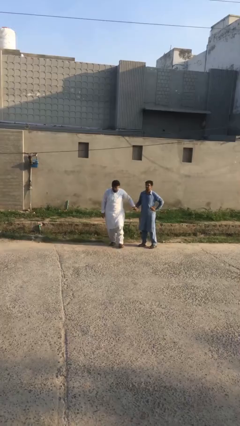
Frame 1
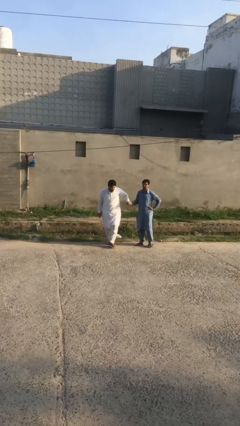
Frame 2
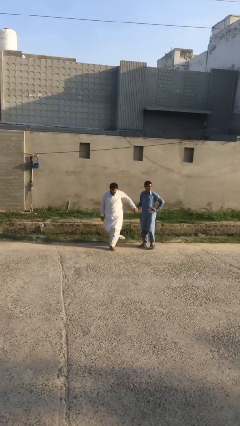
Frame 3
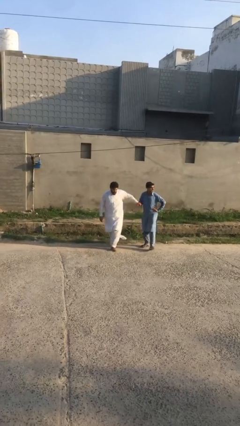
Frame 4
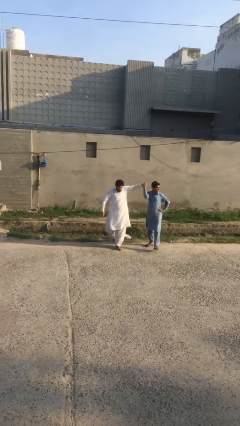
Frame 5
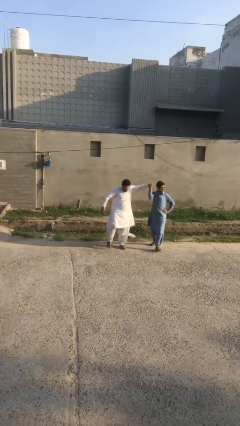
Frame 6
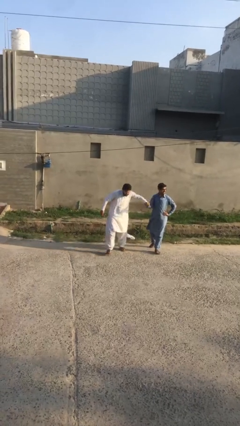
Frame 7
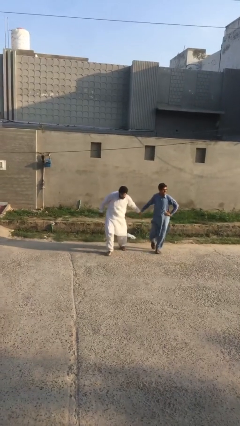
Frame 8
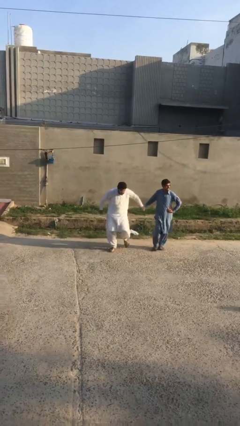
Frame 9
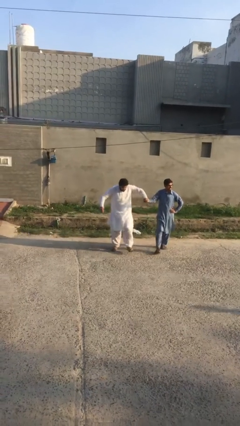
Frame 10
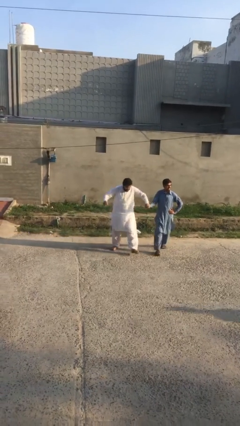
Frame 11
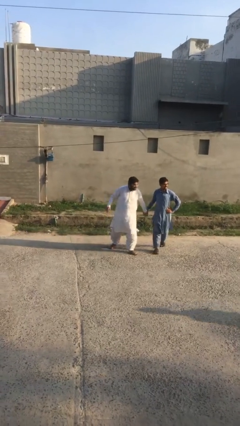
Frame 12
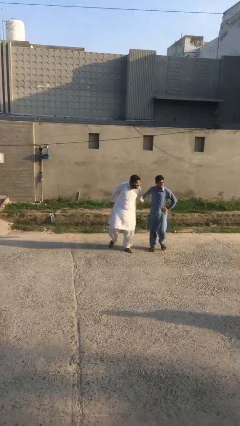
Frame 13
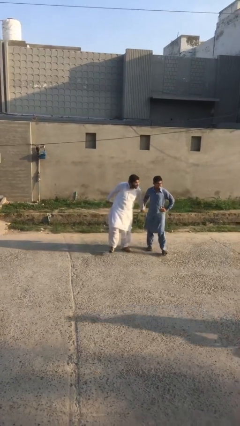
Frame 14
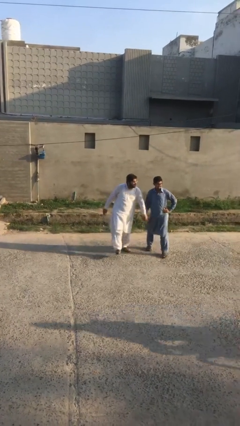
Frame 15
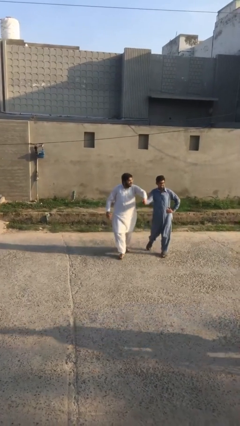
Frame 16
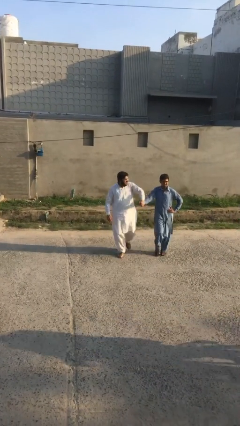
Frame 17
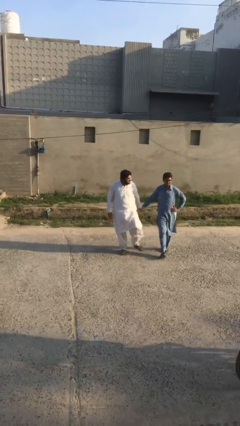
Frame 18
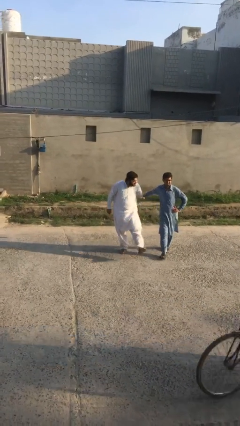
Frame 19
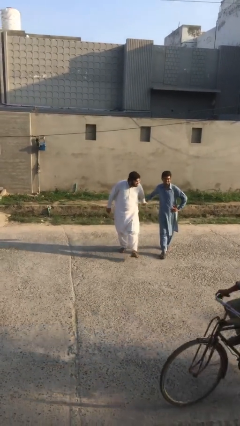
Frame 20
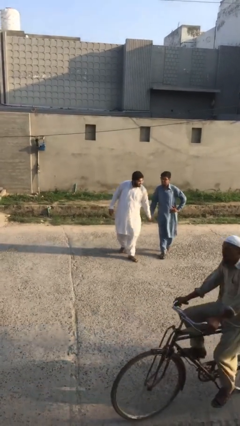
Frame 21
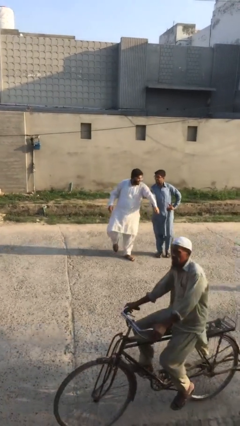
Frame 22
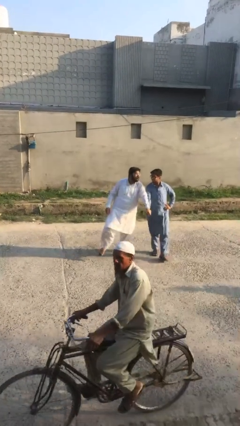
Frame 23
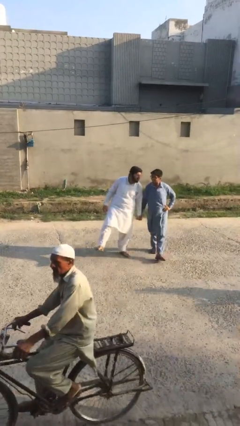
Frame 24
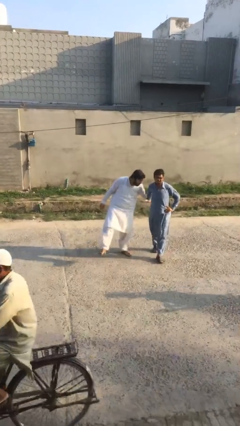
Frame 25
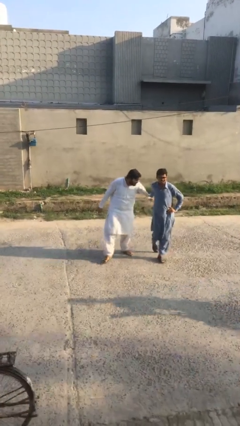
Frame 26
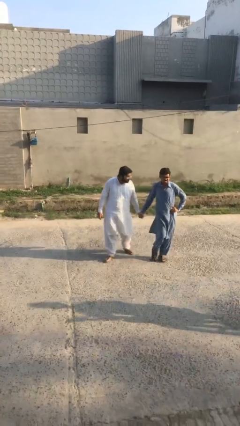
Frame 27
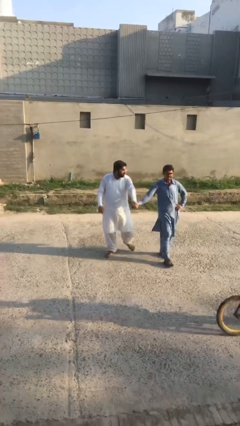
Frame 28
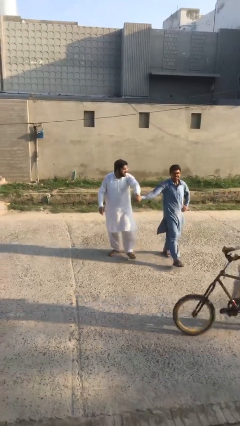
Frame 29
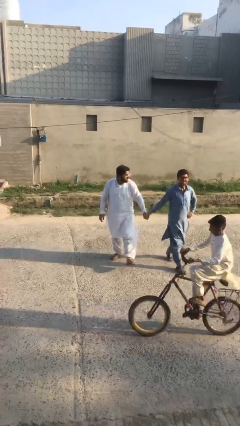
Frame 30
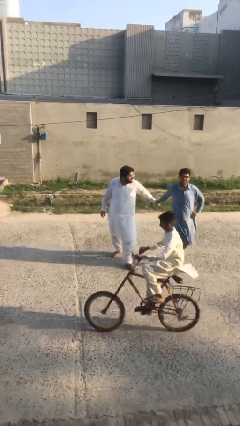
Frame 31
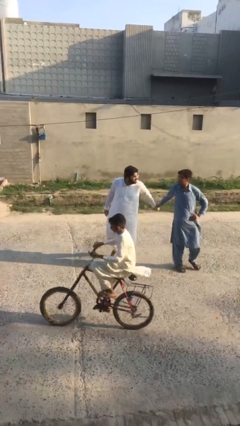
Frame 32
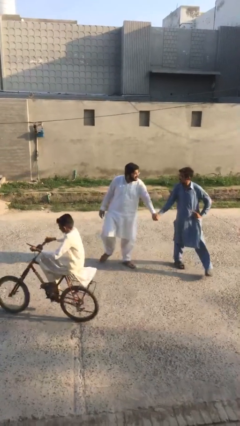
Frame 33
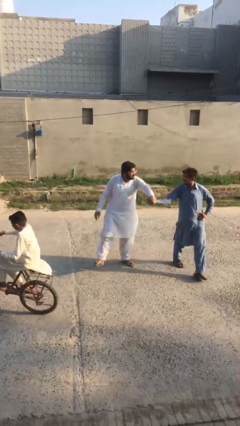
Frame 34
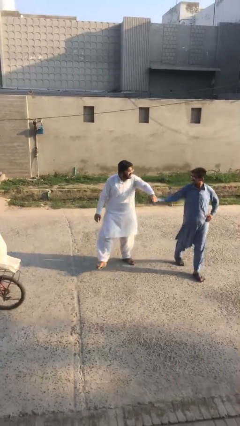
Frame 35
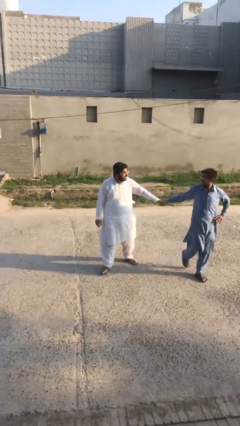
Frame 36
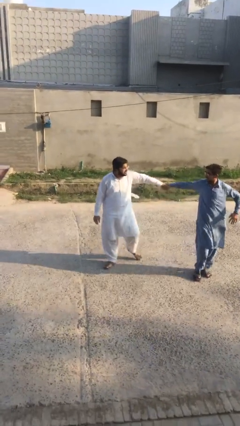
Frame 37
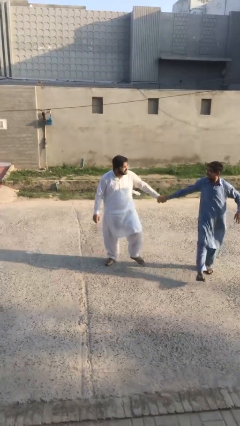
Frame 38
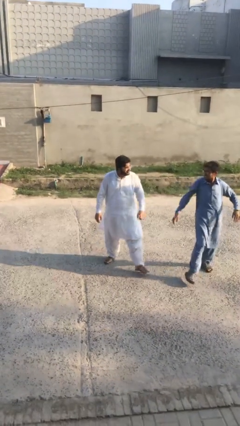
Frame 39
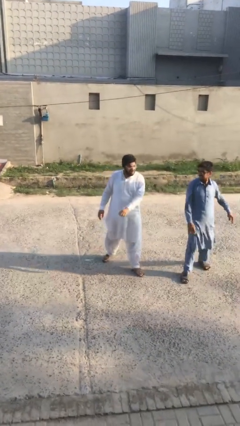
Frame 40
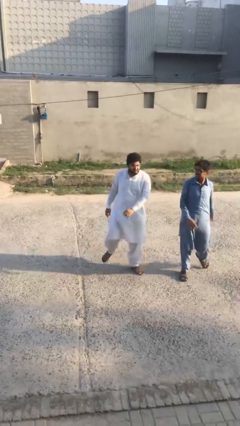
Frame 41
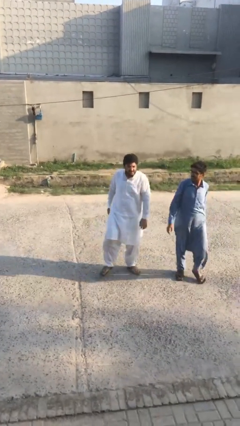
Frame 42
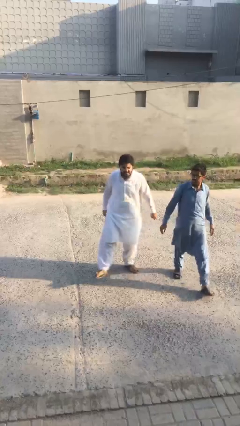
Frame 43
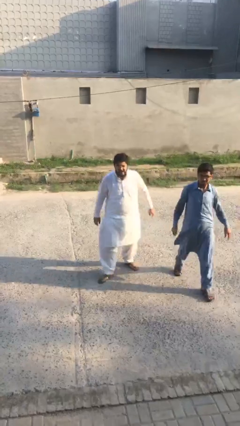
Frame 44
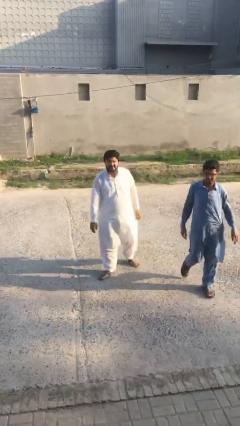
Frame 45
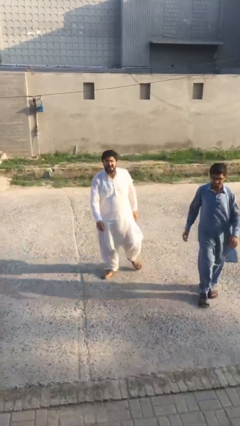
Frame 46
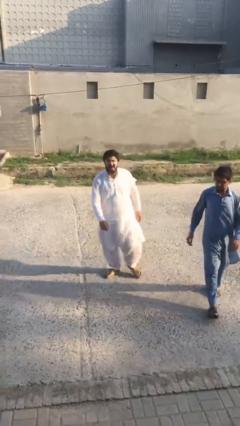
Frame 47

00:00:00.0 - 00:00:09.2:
person holds hand

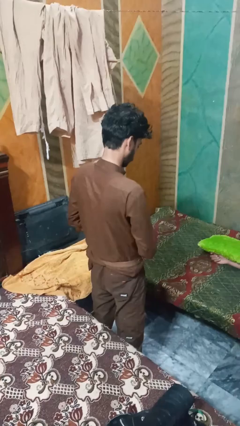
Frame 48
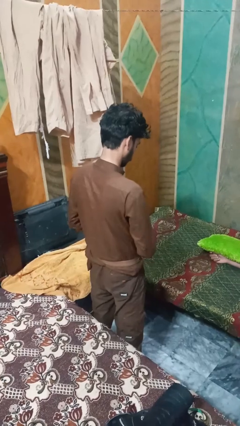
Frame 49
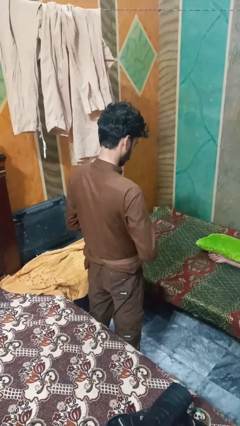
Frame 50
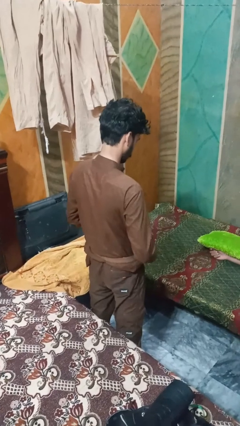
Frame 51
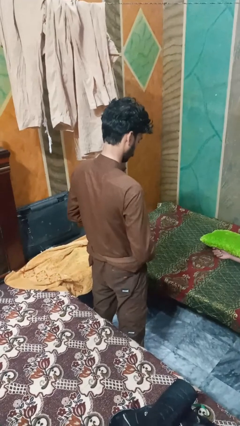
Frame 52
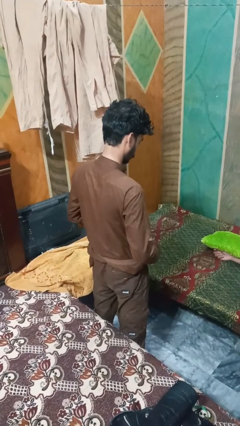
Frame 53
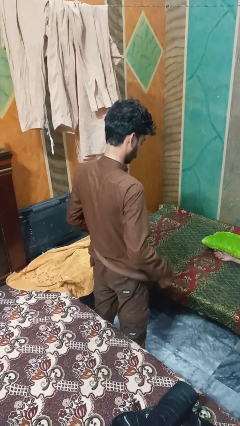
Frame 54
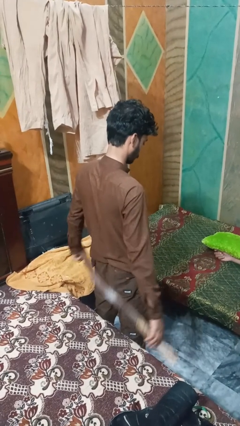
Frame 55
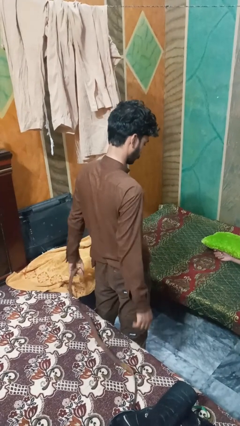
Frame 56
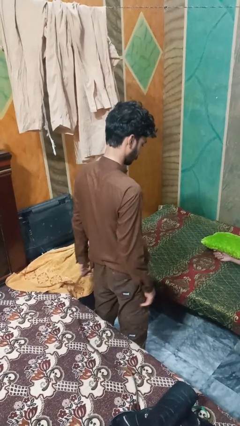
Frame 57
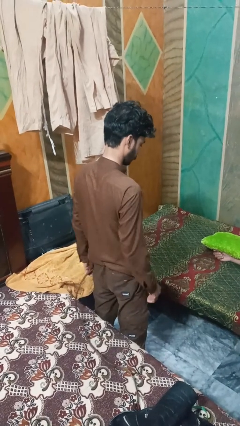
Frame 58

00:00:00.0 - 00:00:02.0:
person takes off belt

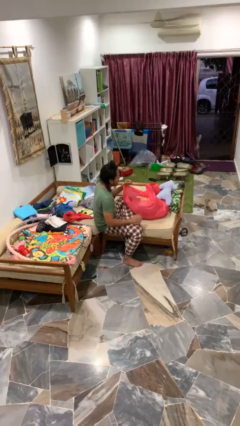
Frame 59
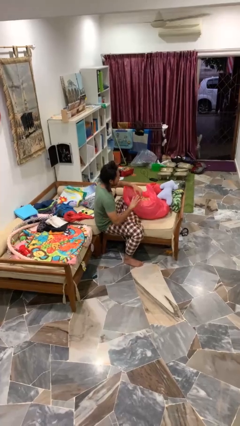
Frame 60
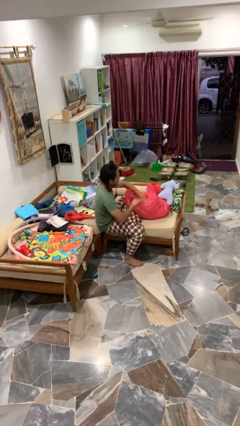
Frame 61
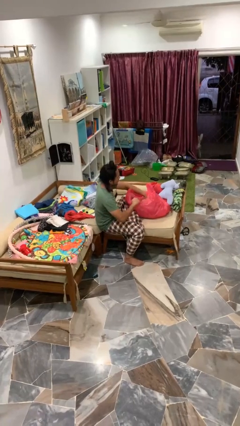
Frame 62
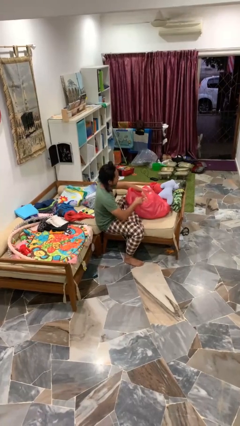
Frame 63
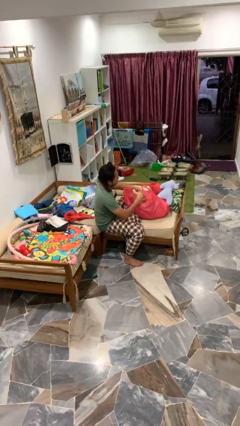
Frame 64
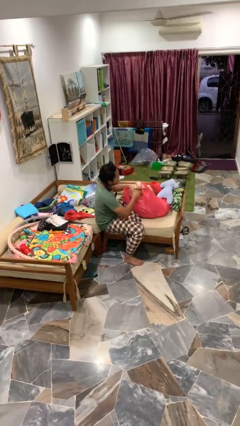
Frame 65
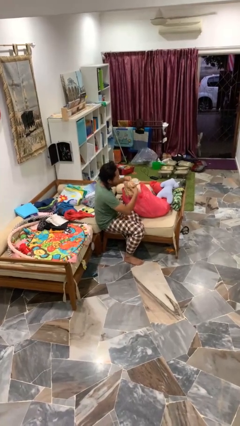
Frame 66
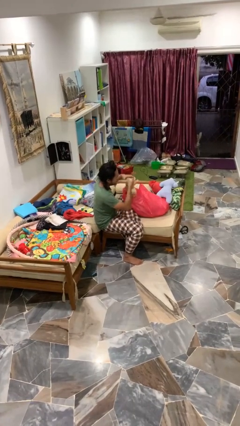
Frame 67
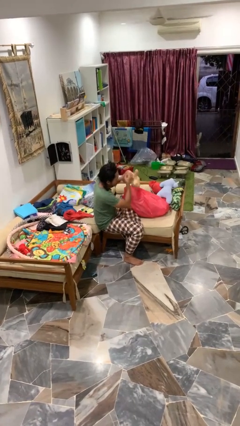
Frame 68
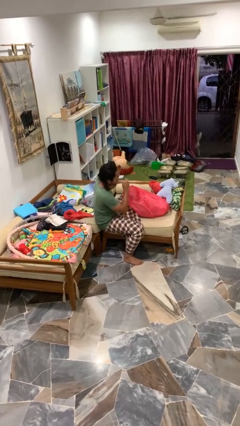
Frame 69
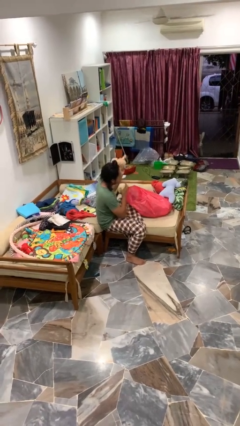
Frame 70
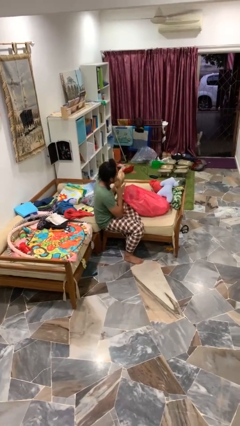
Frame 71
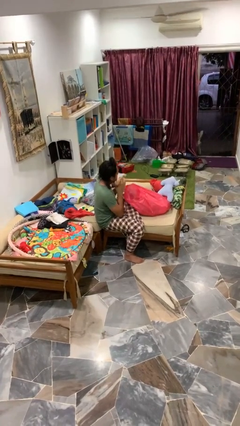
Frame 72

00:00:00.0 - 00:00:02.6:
person takes object from bag

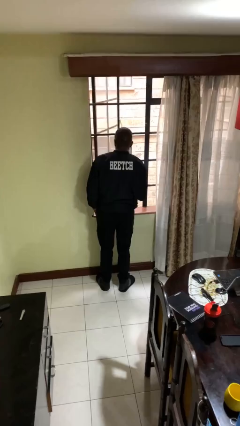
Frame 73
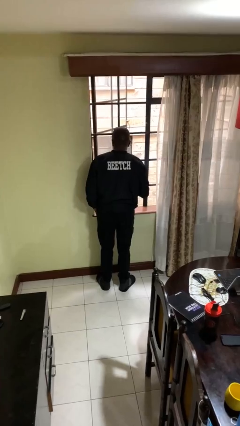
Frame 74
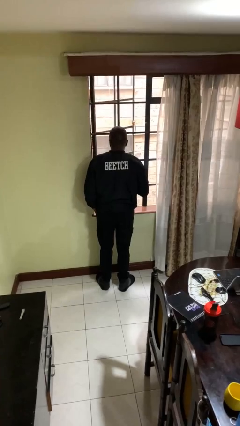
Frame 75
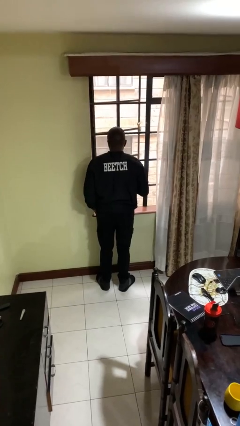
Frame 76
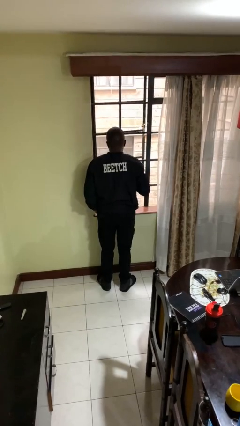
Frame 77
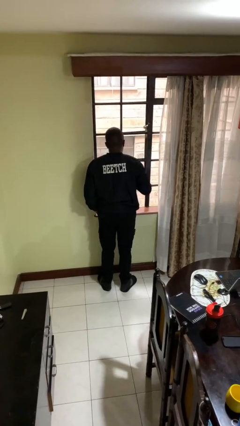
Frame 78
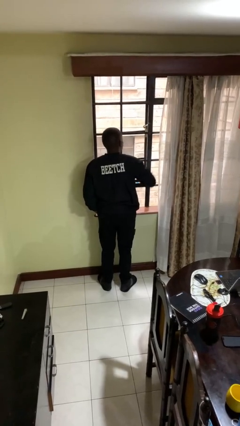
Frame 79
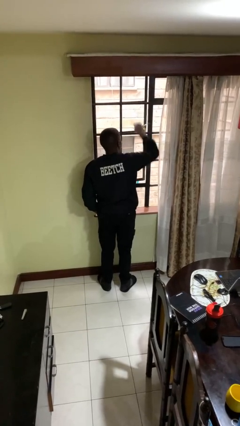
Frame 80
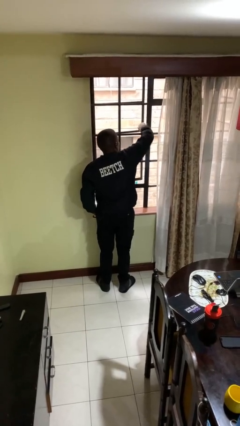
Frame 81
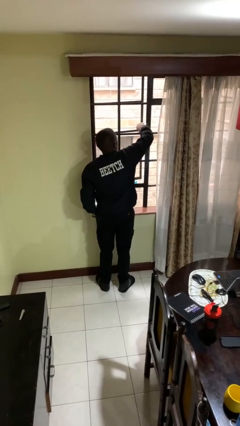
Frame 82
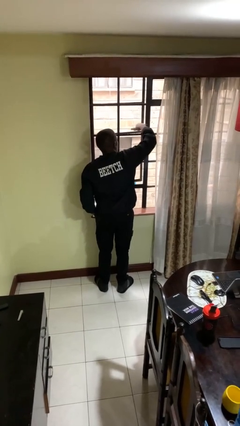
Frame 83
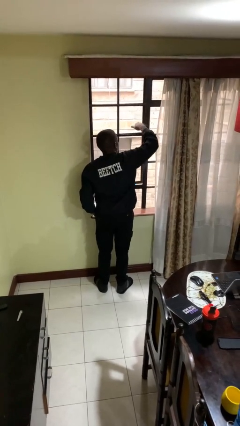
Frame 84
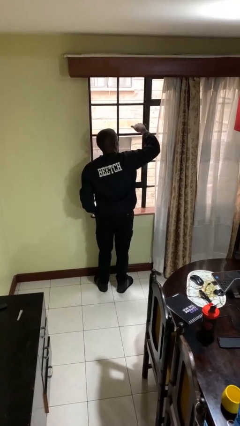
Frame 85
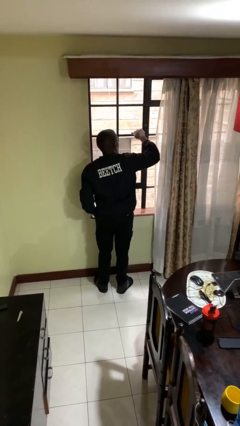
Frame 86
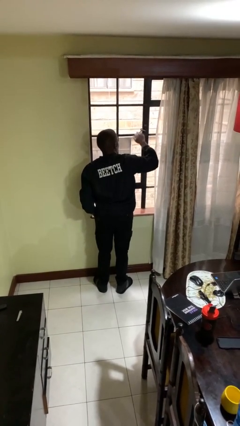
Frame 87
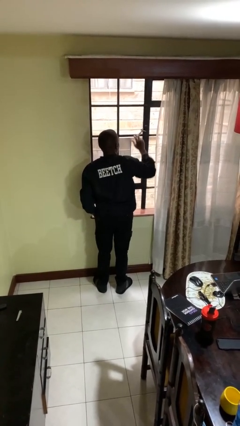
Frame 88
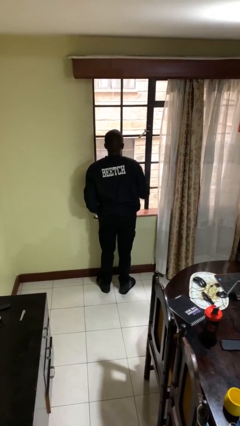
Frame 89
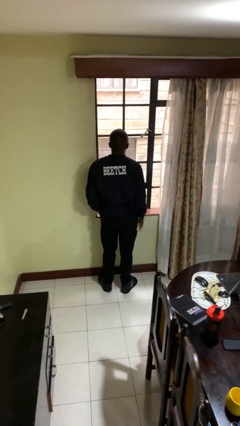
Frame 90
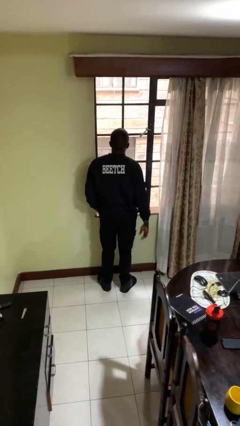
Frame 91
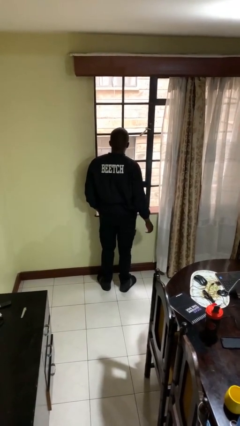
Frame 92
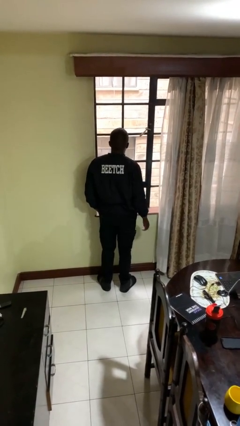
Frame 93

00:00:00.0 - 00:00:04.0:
person closes home window

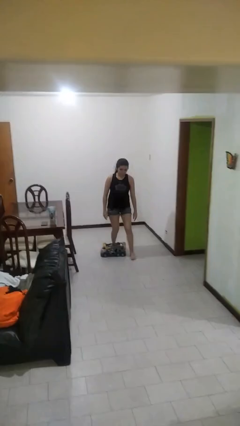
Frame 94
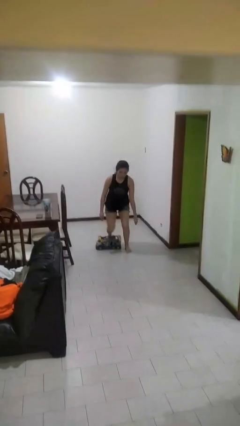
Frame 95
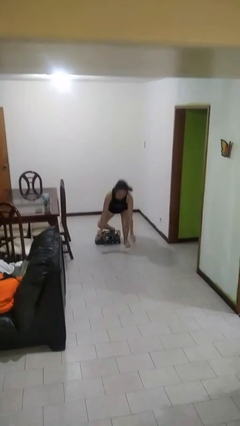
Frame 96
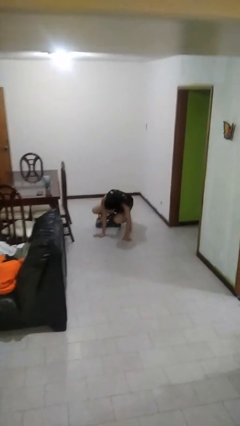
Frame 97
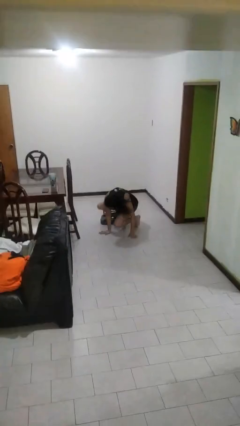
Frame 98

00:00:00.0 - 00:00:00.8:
person trips on object on floor
